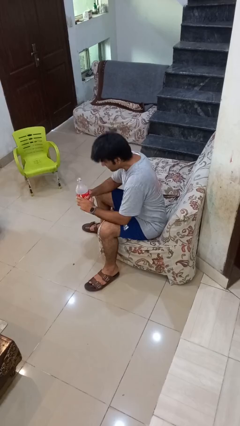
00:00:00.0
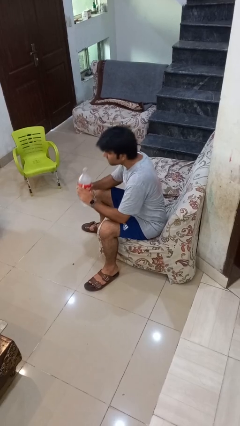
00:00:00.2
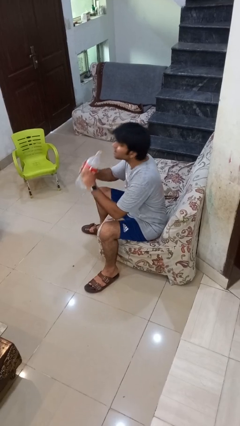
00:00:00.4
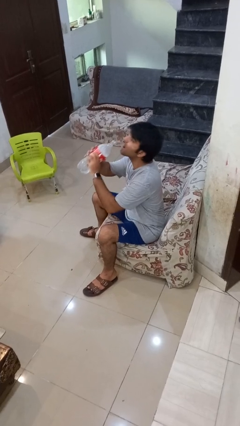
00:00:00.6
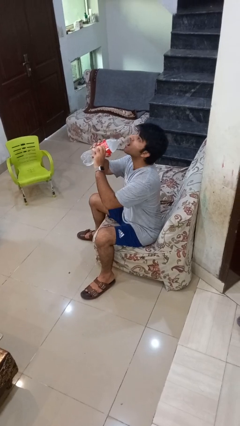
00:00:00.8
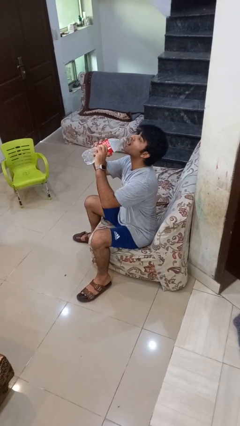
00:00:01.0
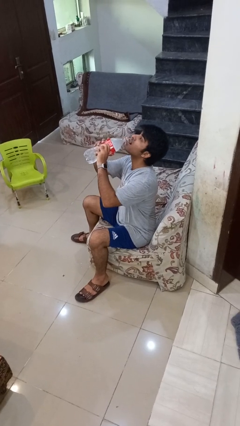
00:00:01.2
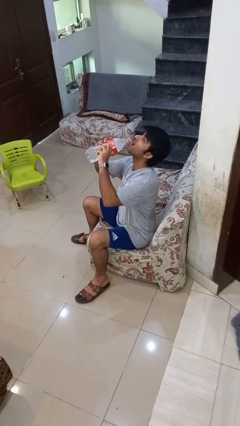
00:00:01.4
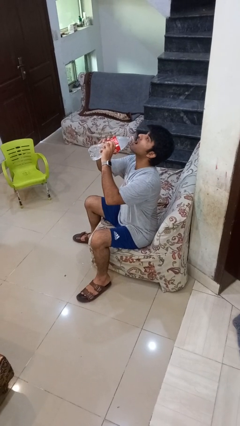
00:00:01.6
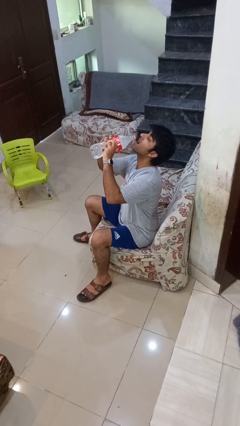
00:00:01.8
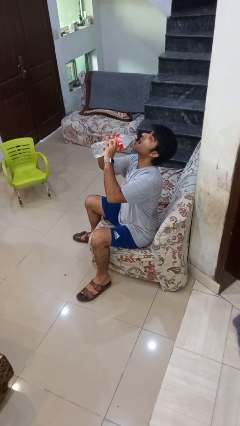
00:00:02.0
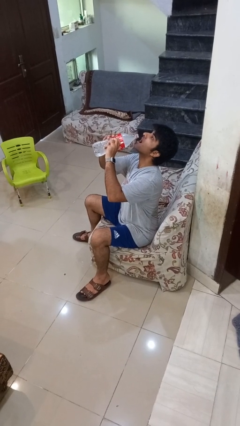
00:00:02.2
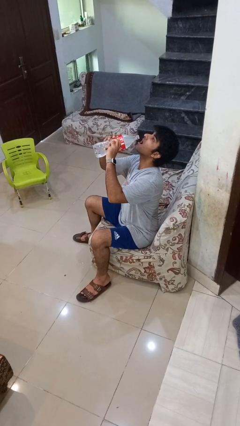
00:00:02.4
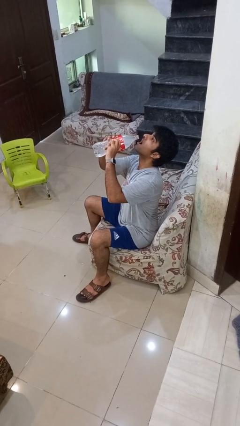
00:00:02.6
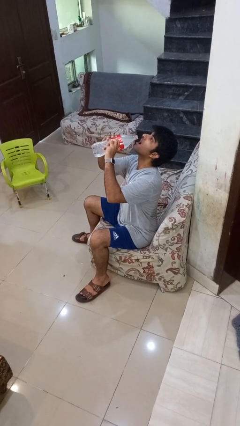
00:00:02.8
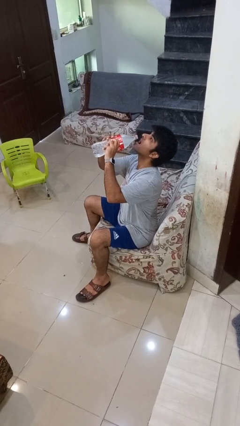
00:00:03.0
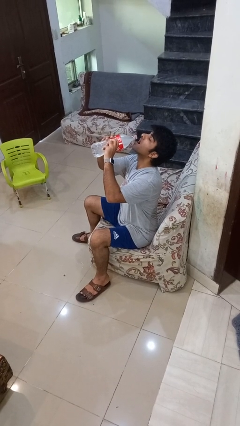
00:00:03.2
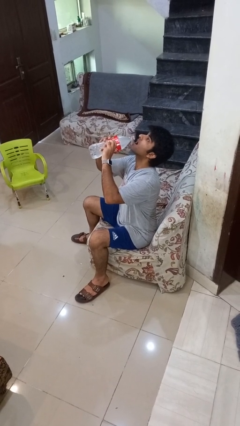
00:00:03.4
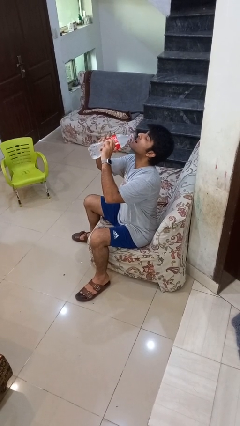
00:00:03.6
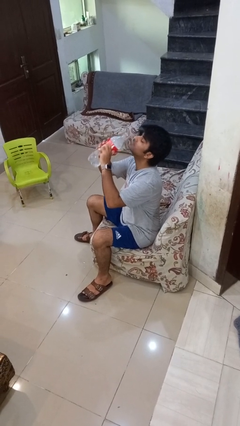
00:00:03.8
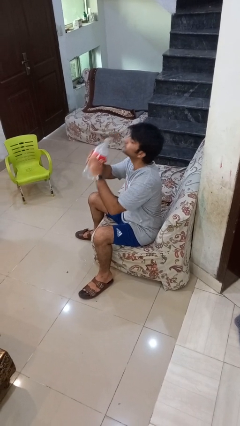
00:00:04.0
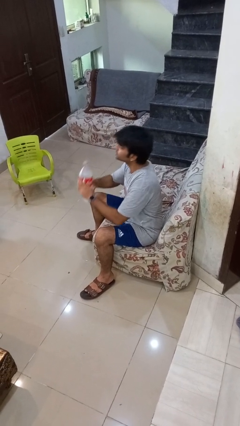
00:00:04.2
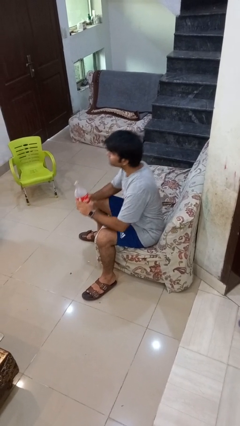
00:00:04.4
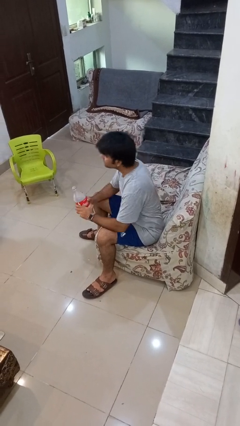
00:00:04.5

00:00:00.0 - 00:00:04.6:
person drinks from bottle

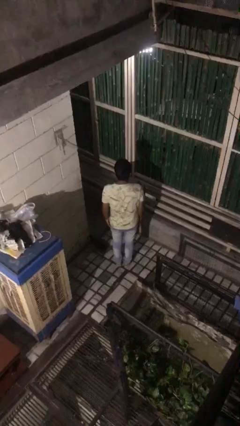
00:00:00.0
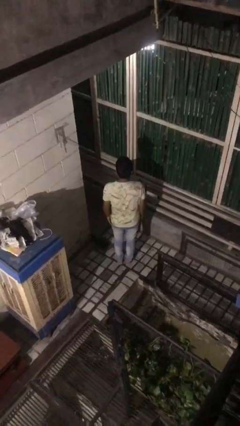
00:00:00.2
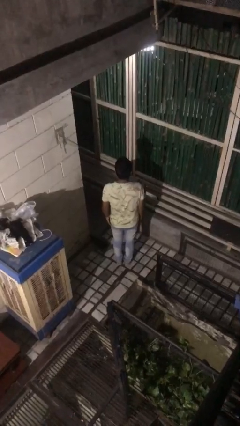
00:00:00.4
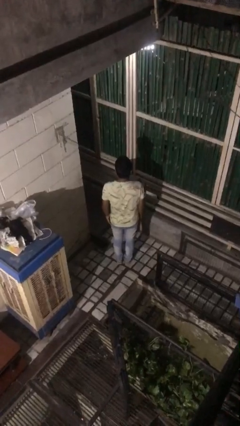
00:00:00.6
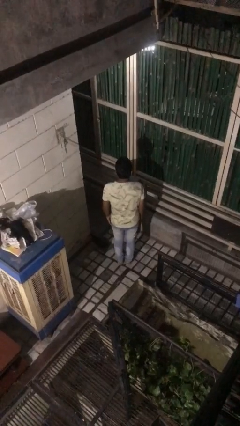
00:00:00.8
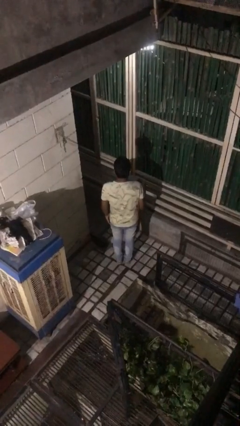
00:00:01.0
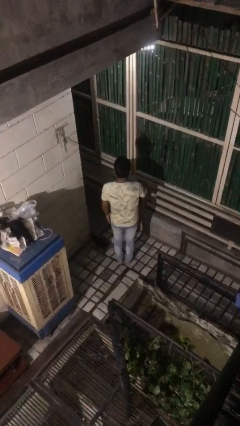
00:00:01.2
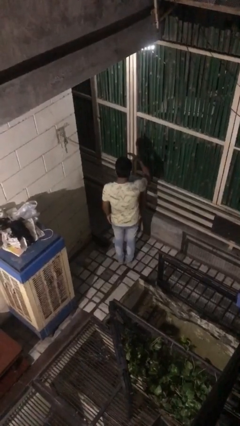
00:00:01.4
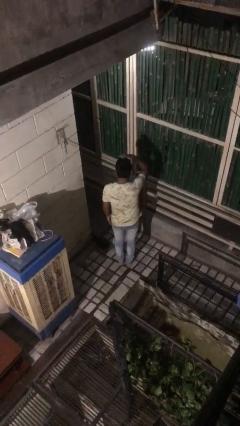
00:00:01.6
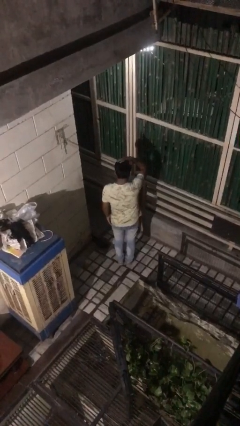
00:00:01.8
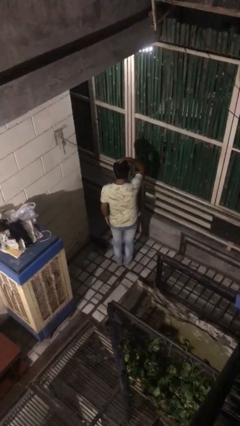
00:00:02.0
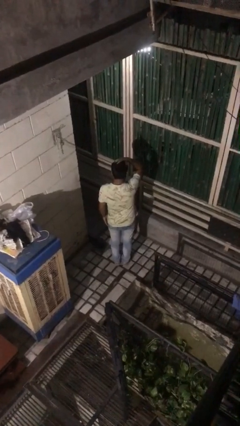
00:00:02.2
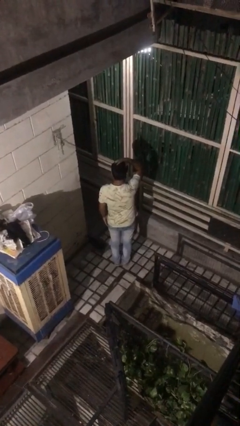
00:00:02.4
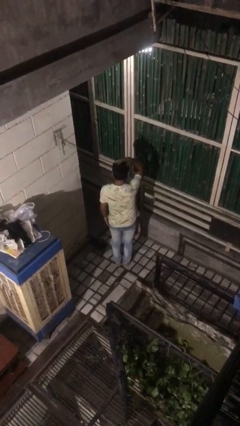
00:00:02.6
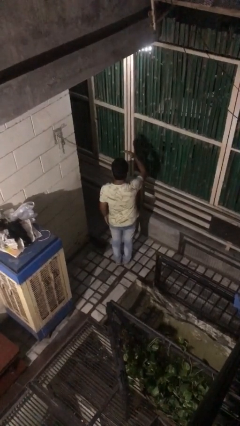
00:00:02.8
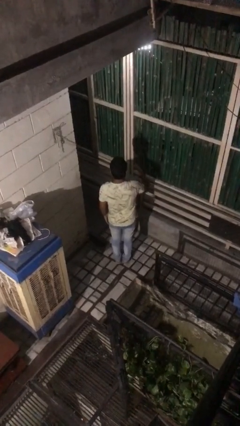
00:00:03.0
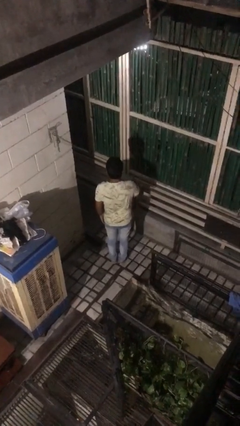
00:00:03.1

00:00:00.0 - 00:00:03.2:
person pats head

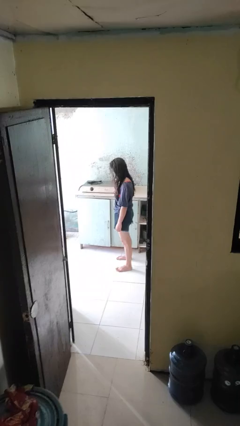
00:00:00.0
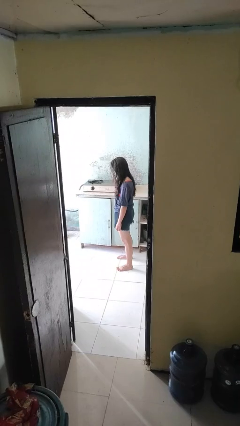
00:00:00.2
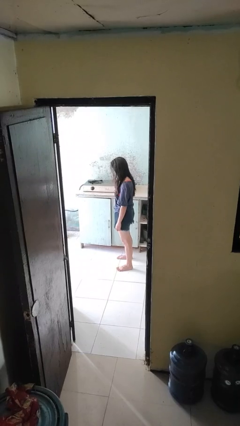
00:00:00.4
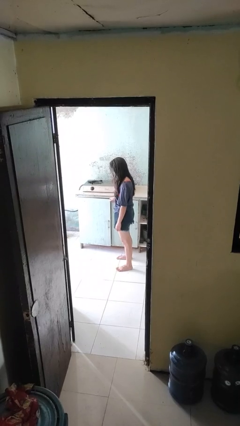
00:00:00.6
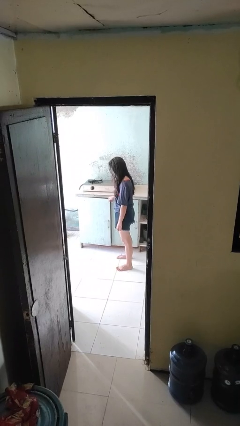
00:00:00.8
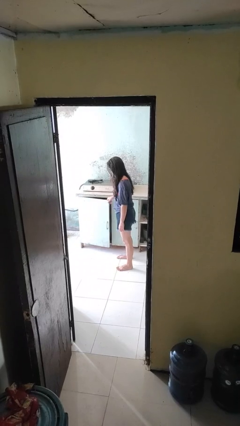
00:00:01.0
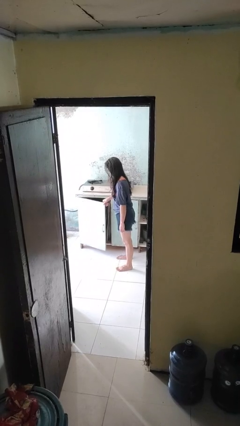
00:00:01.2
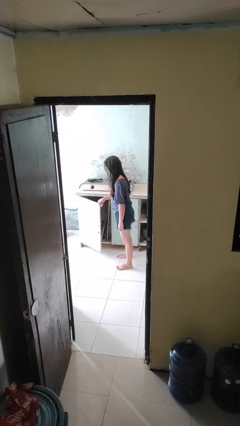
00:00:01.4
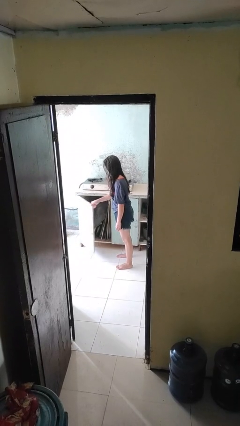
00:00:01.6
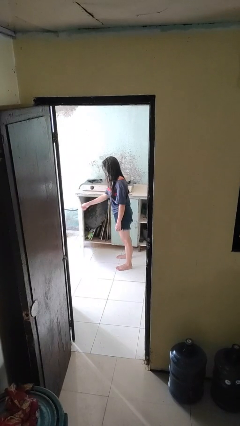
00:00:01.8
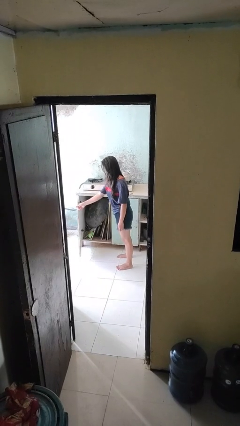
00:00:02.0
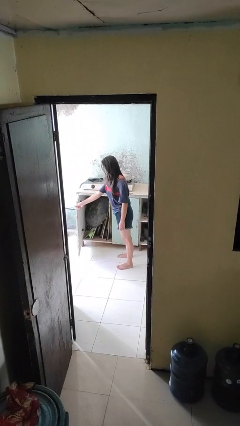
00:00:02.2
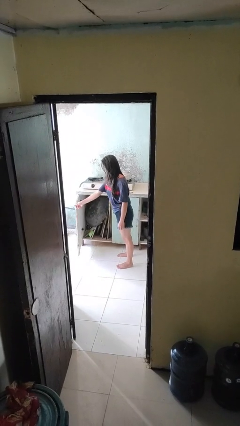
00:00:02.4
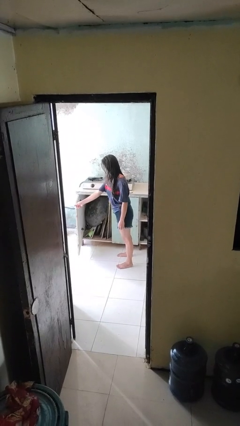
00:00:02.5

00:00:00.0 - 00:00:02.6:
person opens cabinet

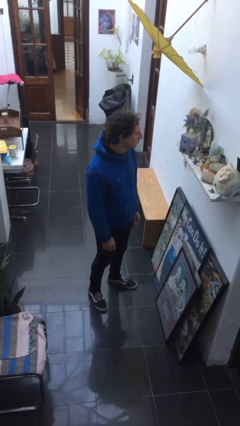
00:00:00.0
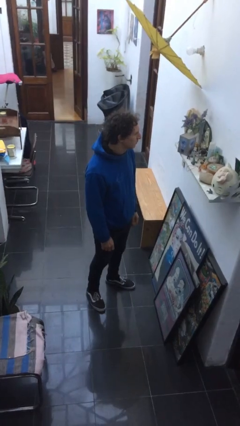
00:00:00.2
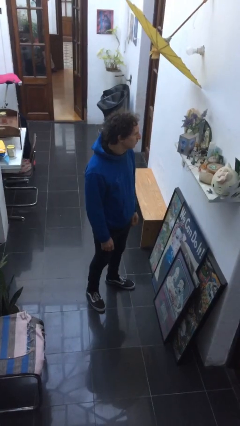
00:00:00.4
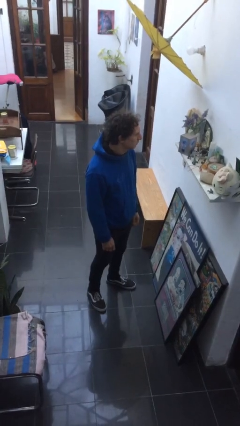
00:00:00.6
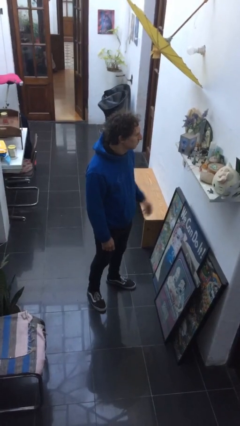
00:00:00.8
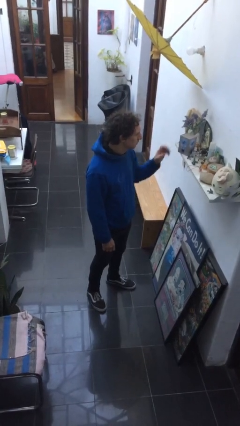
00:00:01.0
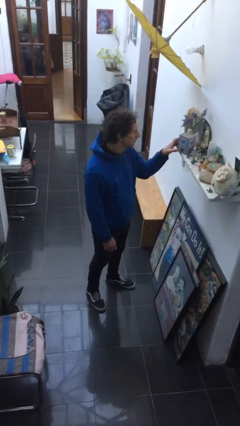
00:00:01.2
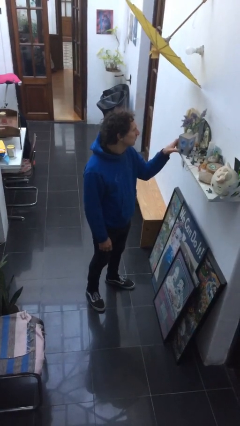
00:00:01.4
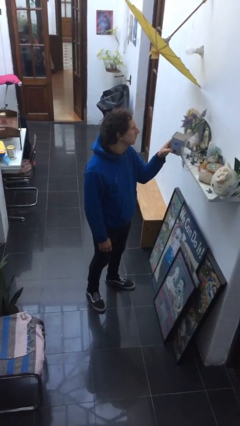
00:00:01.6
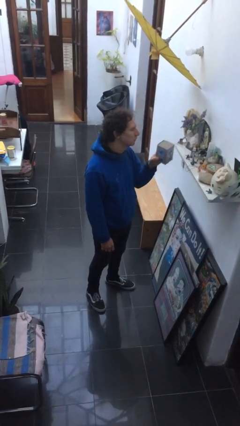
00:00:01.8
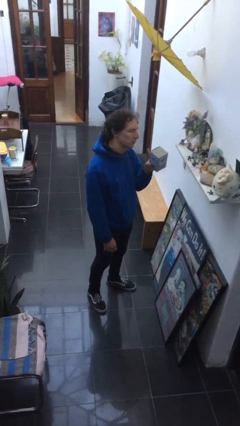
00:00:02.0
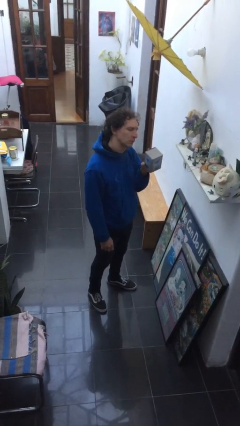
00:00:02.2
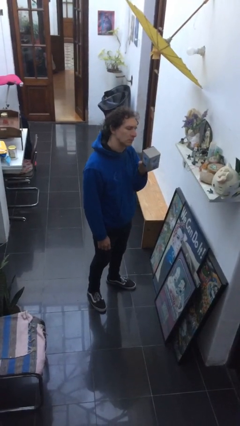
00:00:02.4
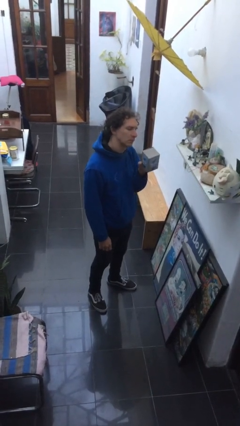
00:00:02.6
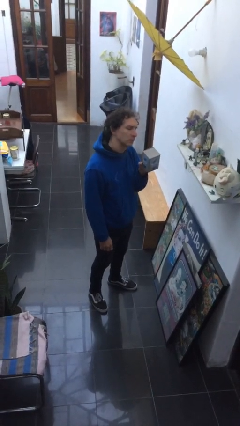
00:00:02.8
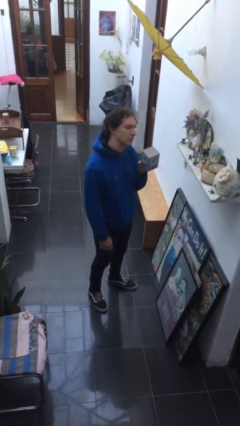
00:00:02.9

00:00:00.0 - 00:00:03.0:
person picks up object from countertop

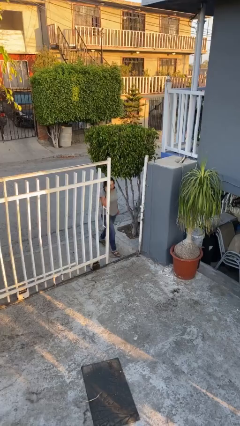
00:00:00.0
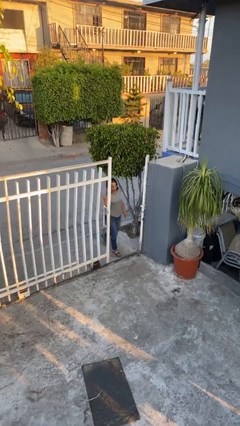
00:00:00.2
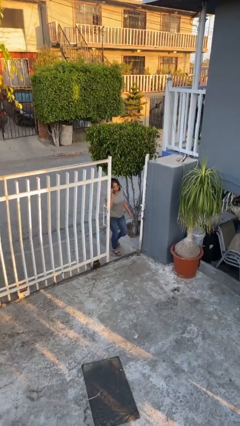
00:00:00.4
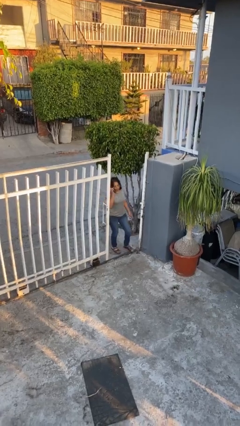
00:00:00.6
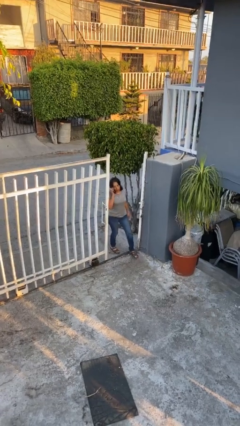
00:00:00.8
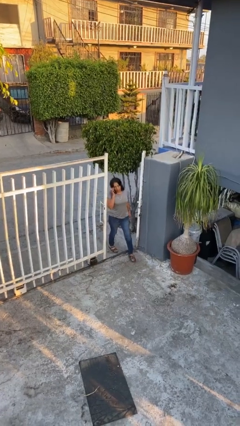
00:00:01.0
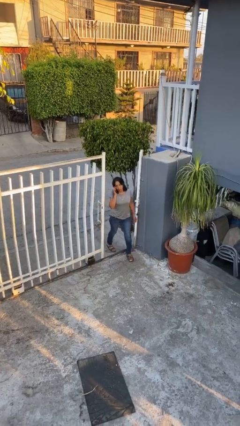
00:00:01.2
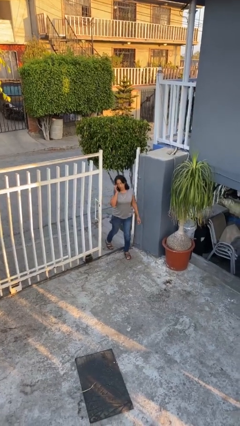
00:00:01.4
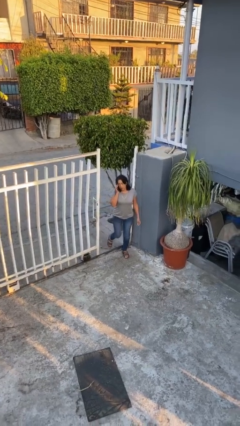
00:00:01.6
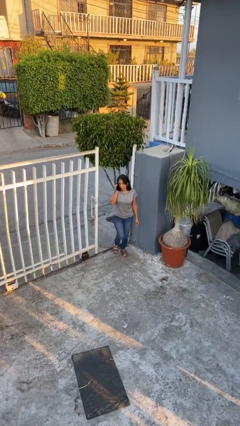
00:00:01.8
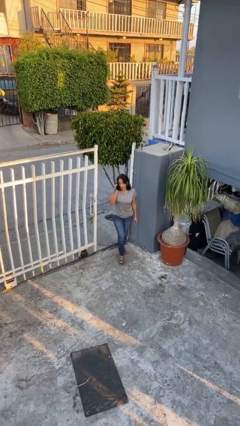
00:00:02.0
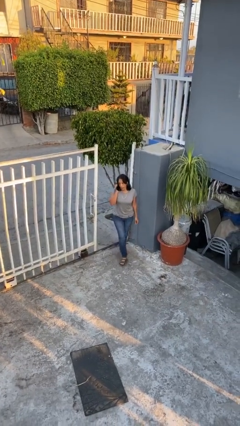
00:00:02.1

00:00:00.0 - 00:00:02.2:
person enters scene through structure

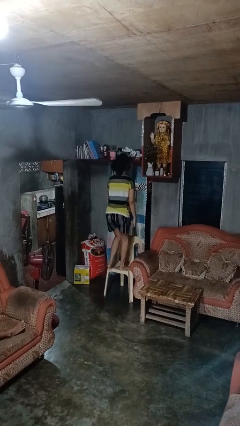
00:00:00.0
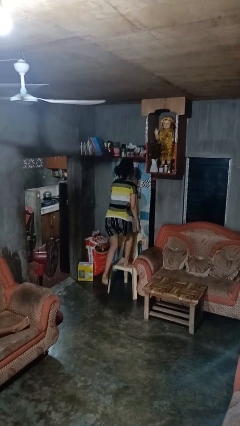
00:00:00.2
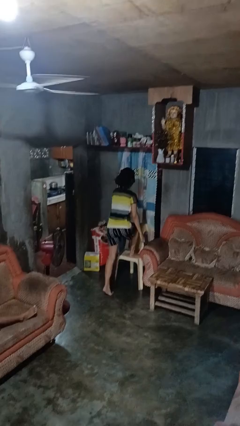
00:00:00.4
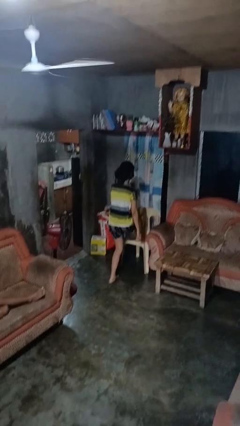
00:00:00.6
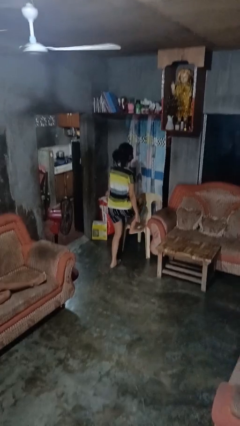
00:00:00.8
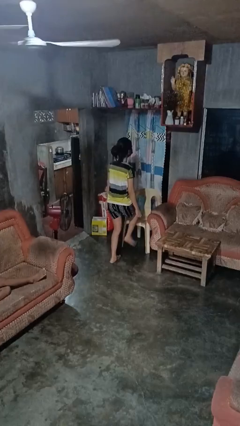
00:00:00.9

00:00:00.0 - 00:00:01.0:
person climbs off chair

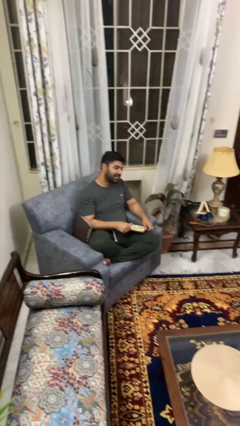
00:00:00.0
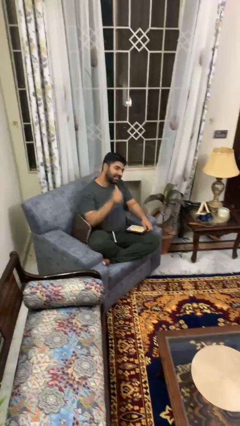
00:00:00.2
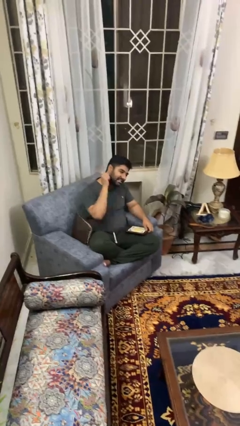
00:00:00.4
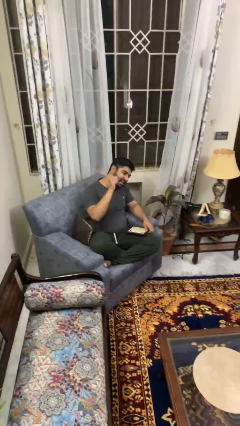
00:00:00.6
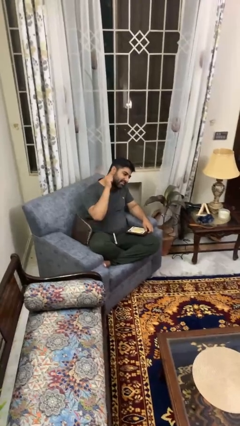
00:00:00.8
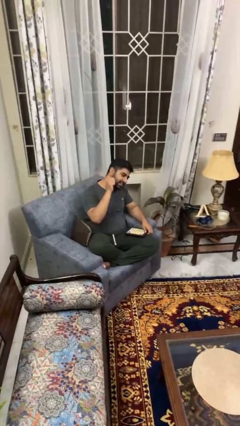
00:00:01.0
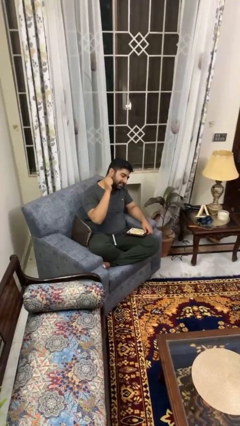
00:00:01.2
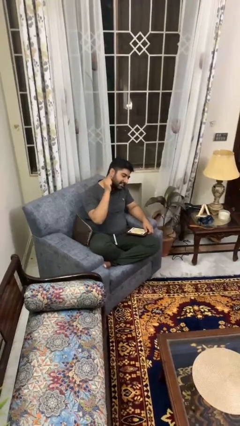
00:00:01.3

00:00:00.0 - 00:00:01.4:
person gestures behind me
